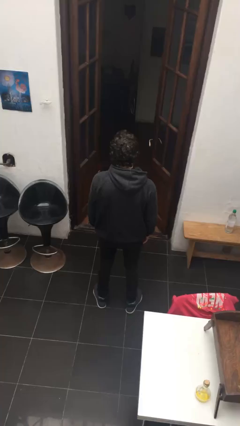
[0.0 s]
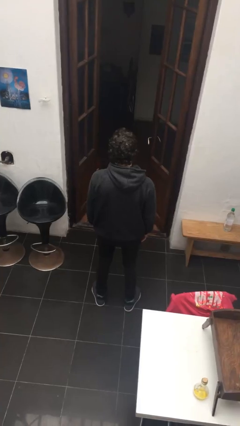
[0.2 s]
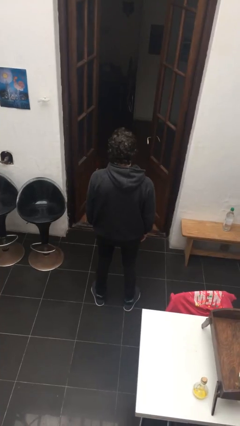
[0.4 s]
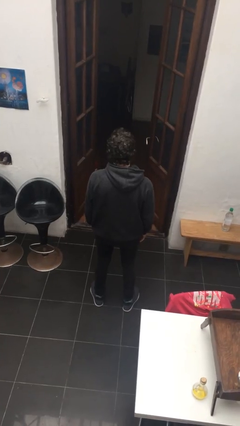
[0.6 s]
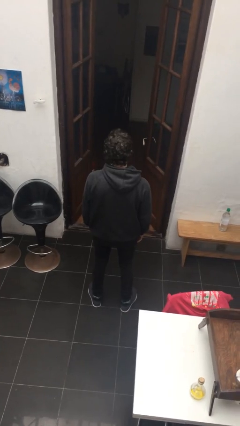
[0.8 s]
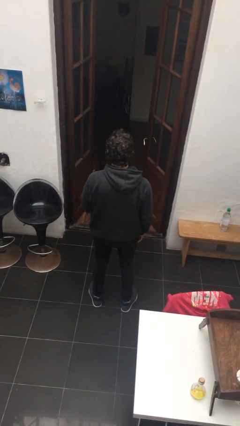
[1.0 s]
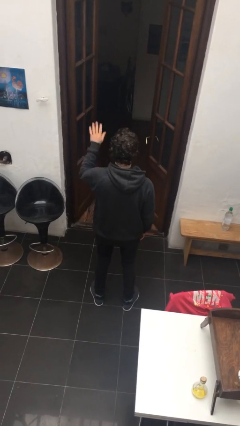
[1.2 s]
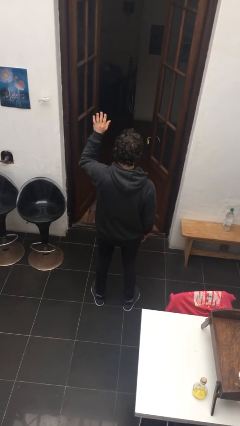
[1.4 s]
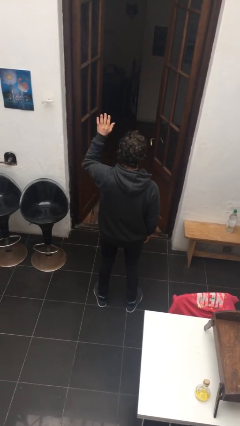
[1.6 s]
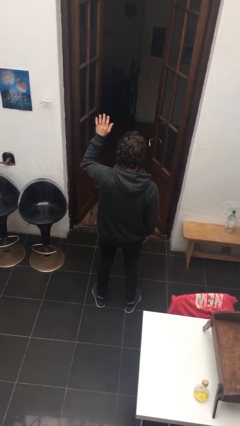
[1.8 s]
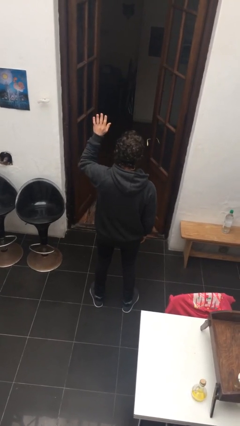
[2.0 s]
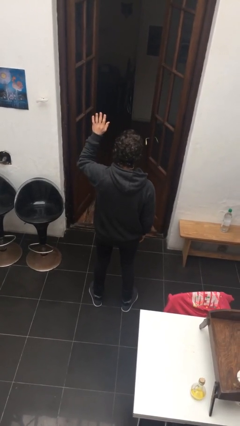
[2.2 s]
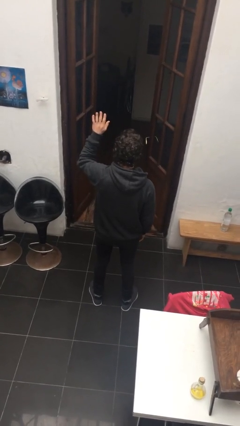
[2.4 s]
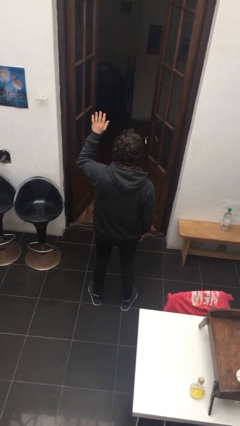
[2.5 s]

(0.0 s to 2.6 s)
person gestures raise hand

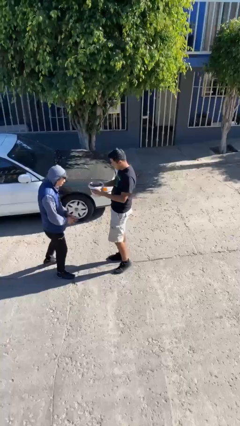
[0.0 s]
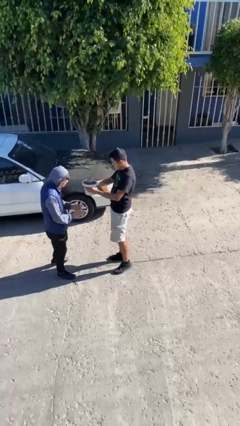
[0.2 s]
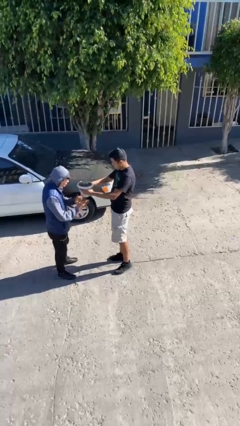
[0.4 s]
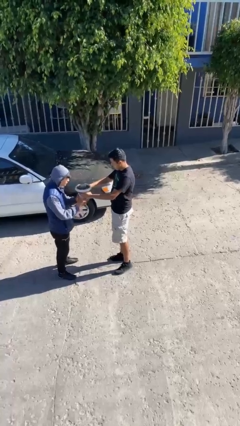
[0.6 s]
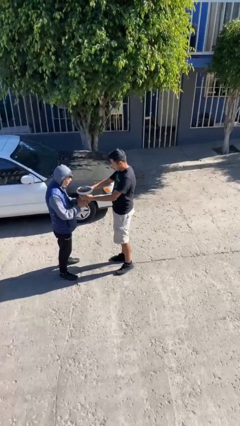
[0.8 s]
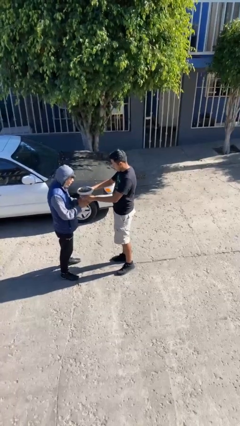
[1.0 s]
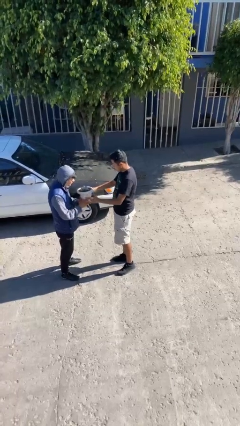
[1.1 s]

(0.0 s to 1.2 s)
person transfers object to person

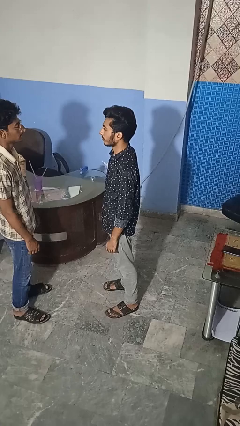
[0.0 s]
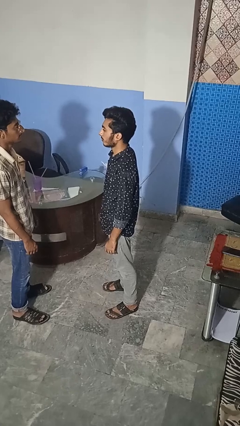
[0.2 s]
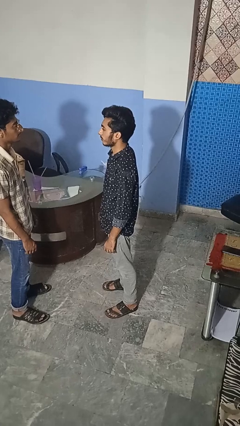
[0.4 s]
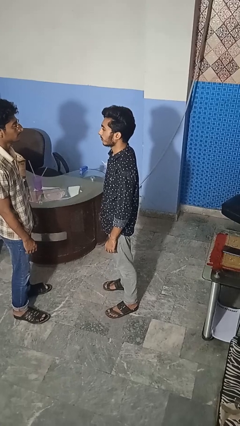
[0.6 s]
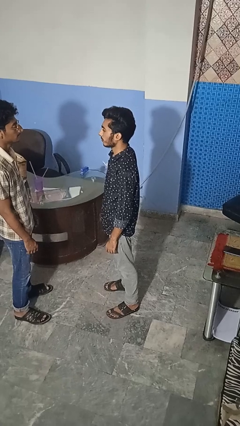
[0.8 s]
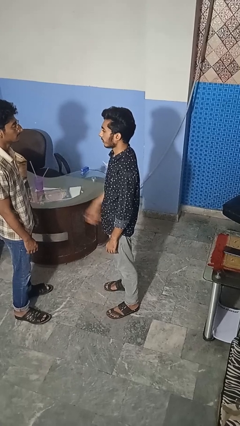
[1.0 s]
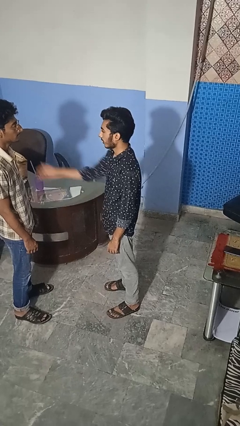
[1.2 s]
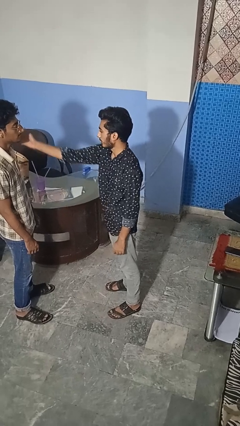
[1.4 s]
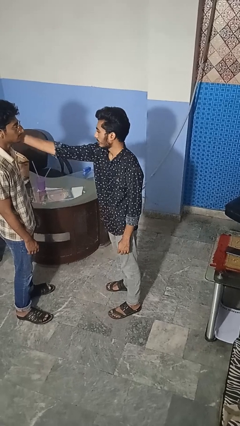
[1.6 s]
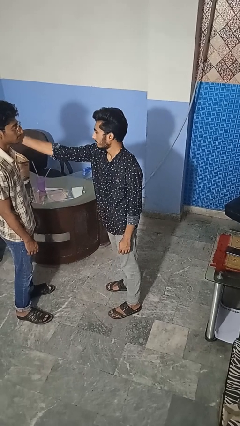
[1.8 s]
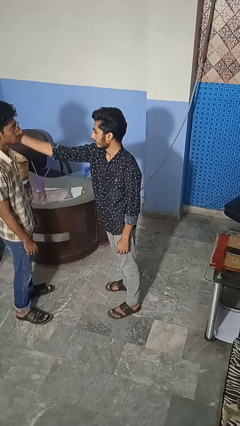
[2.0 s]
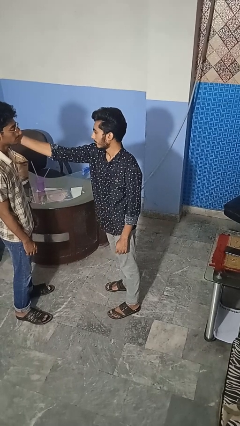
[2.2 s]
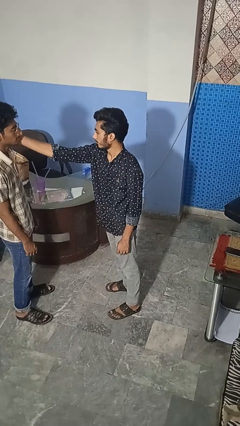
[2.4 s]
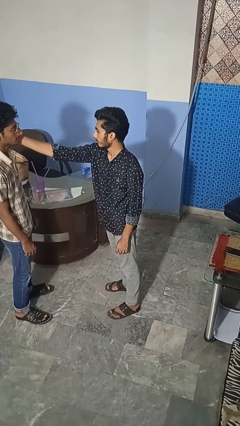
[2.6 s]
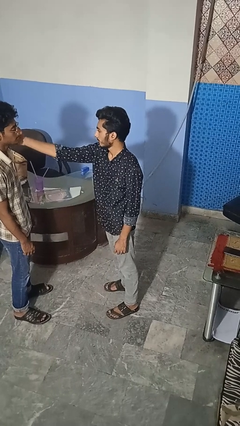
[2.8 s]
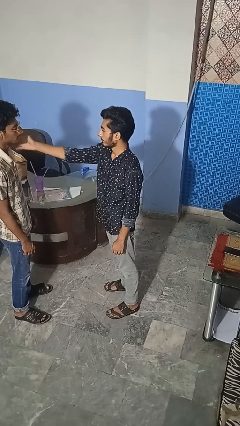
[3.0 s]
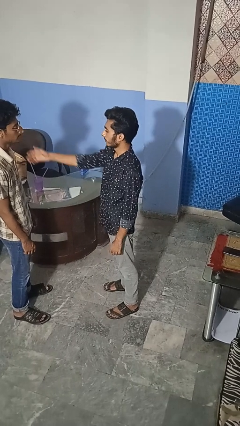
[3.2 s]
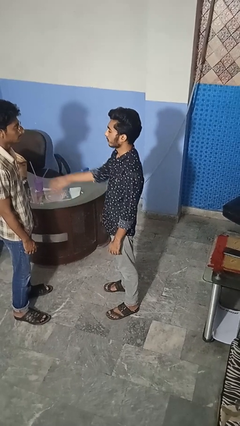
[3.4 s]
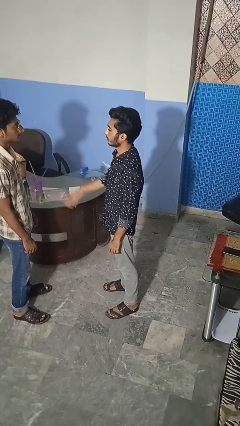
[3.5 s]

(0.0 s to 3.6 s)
person touches face of person

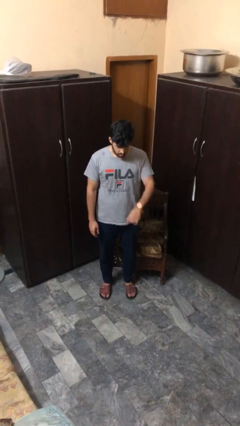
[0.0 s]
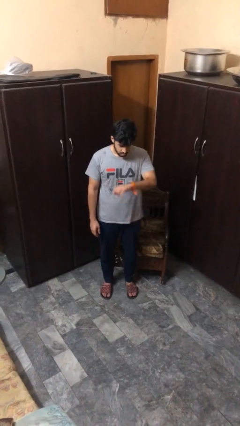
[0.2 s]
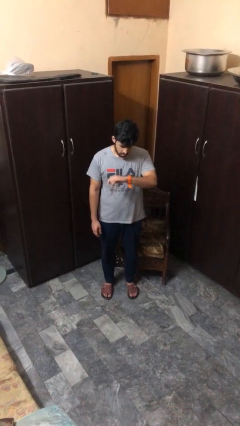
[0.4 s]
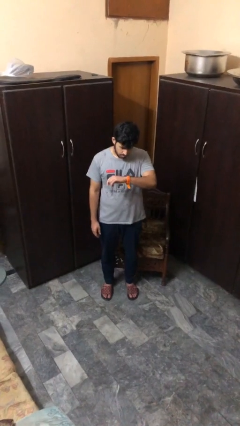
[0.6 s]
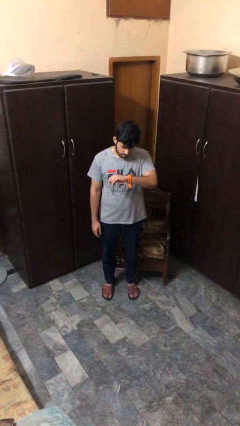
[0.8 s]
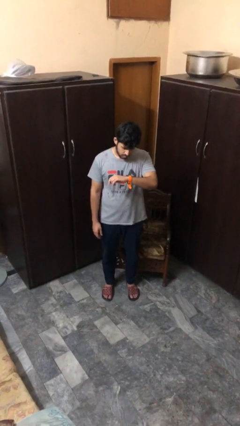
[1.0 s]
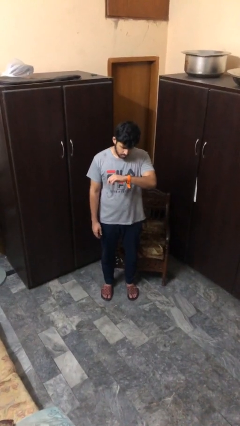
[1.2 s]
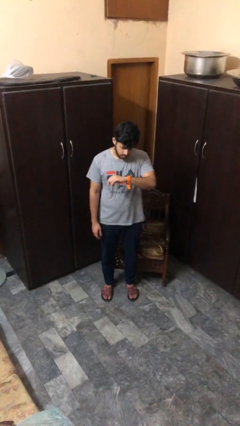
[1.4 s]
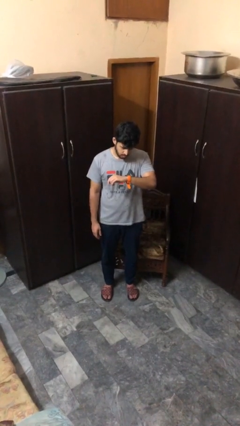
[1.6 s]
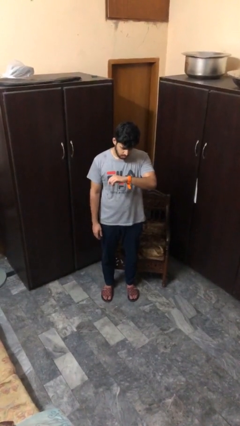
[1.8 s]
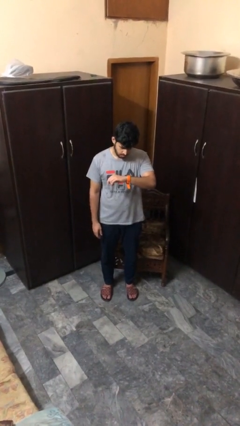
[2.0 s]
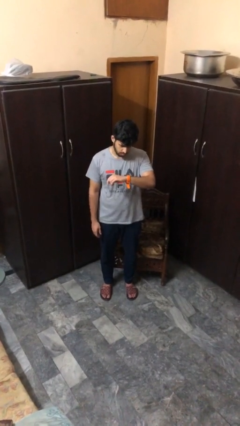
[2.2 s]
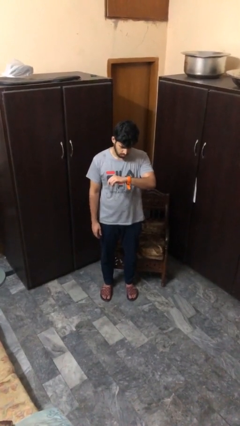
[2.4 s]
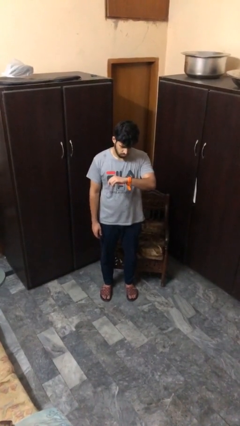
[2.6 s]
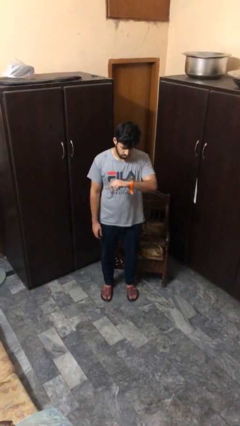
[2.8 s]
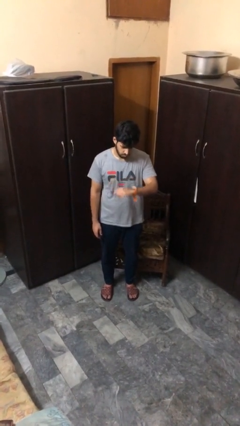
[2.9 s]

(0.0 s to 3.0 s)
person looks at wristwatch

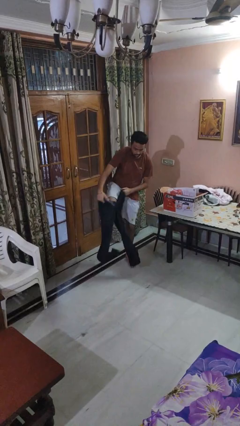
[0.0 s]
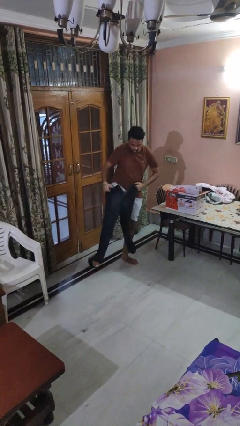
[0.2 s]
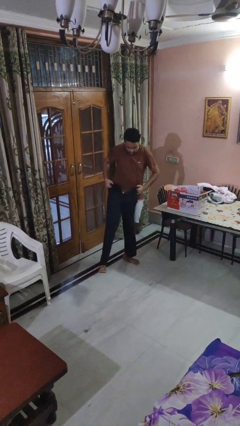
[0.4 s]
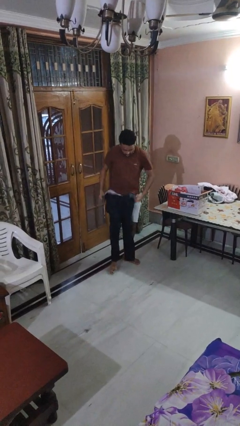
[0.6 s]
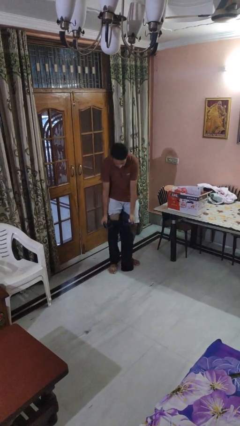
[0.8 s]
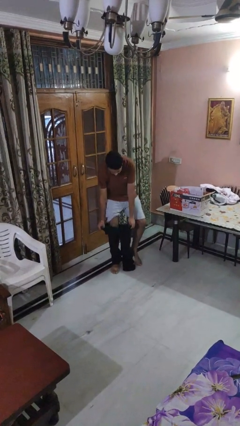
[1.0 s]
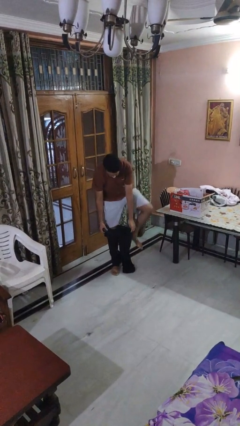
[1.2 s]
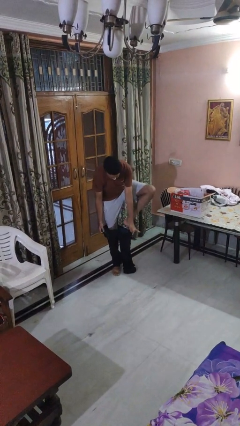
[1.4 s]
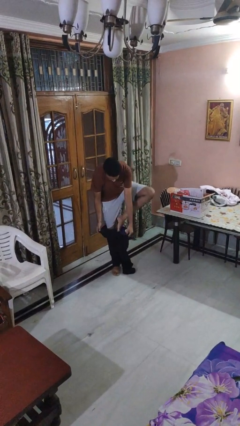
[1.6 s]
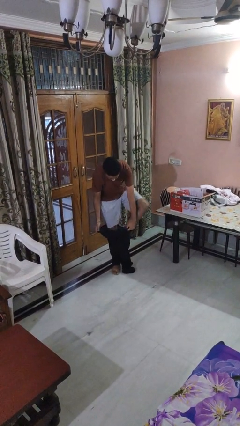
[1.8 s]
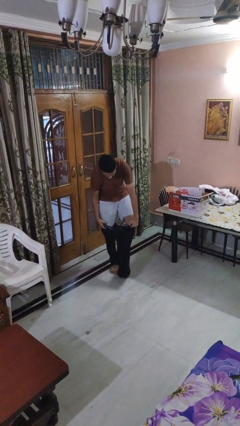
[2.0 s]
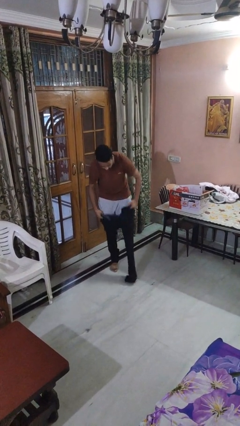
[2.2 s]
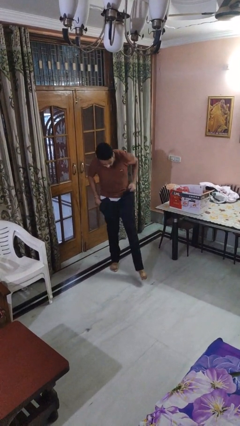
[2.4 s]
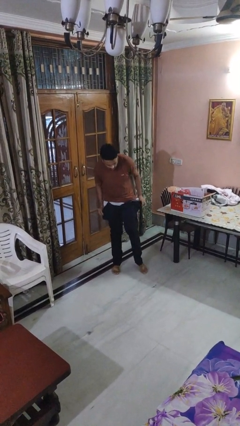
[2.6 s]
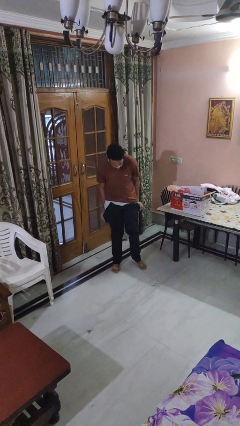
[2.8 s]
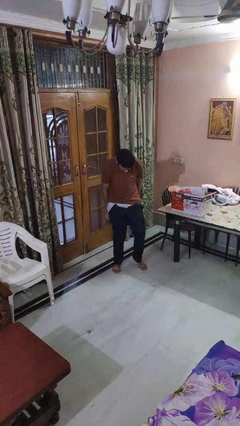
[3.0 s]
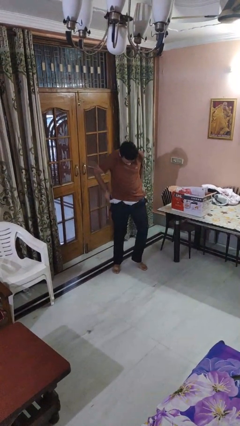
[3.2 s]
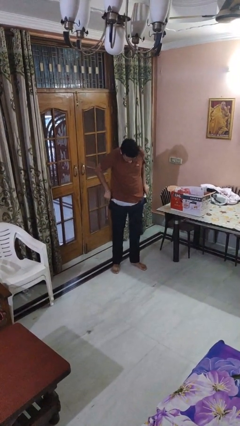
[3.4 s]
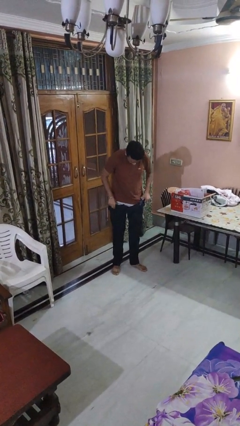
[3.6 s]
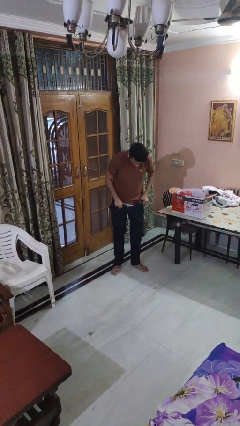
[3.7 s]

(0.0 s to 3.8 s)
person puts on pants

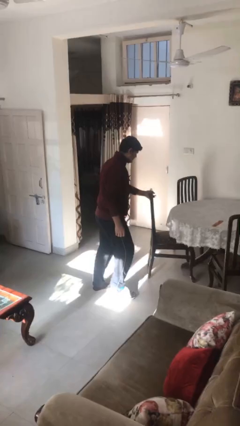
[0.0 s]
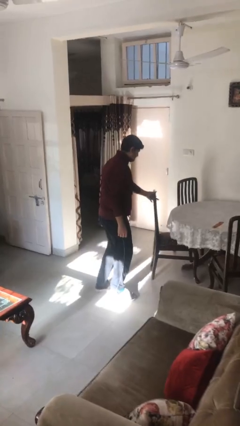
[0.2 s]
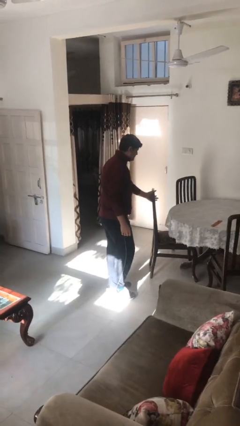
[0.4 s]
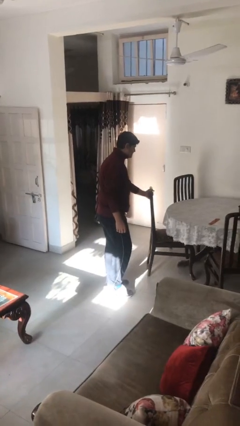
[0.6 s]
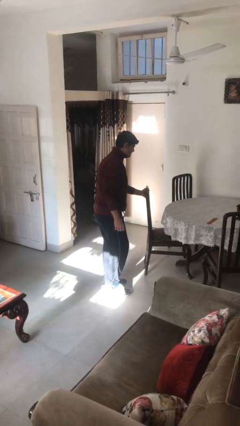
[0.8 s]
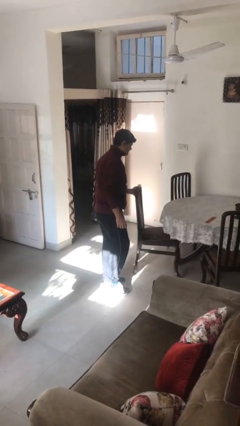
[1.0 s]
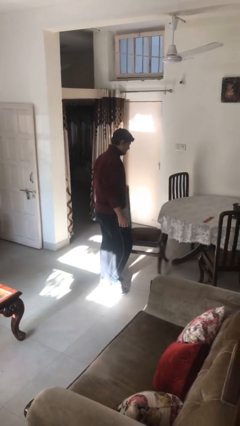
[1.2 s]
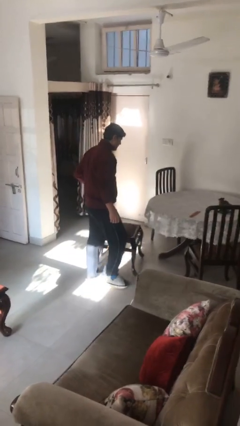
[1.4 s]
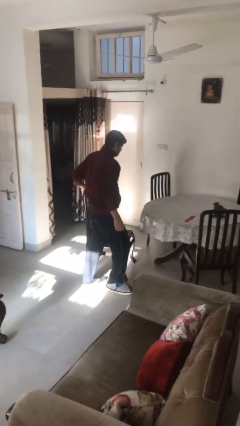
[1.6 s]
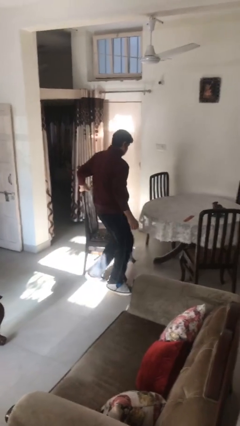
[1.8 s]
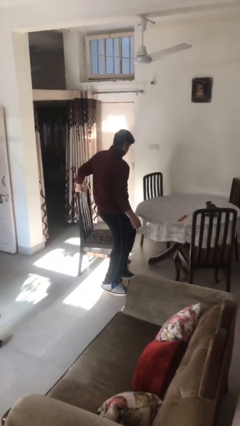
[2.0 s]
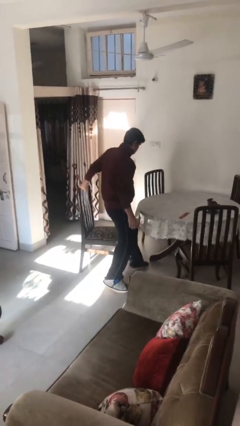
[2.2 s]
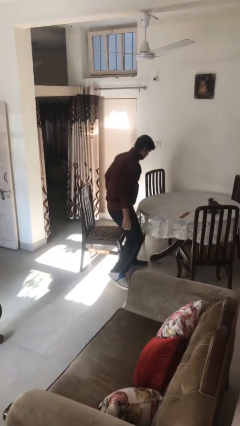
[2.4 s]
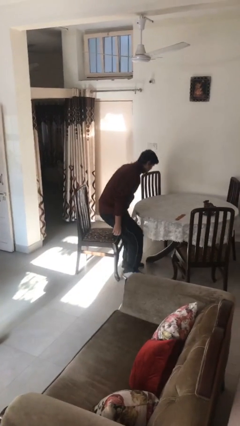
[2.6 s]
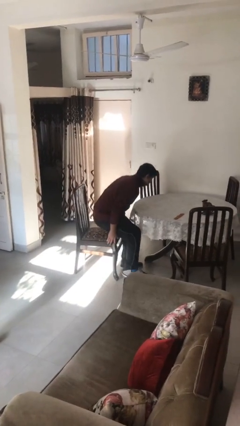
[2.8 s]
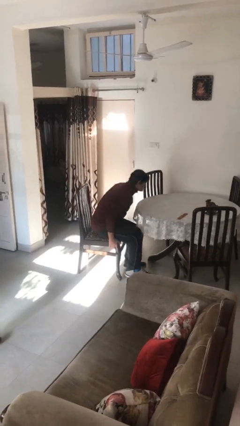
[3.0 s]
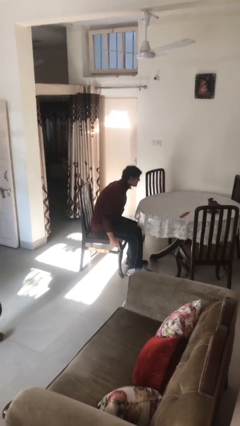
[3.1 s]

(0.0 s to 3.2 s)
person sits down
